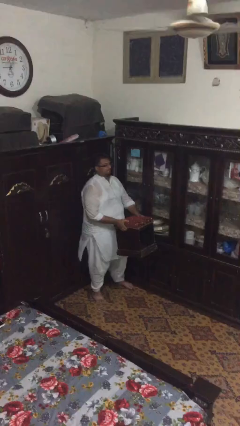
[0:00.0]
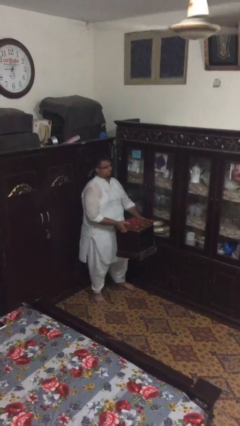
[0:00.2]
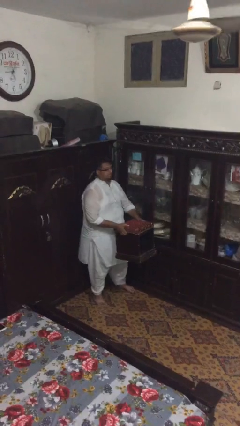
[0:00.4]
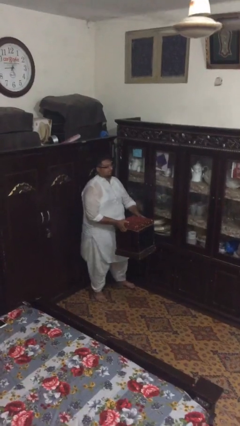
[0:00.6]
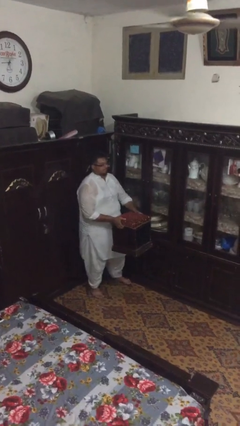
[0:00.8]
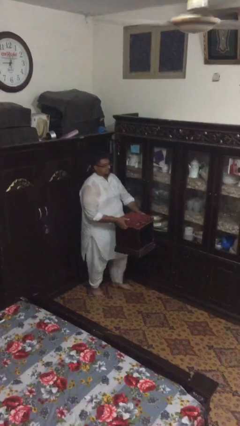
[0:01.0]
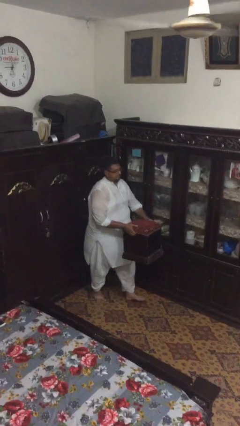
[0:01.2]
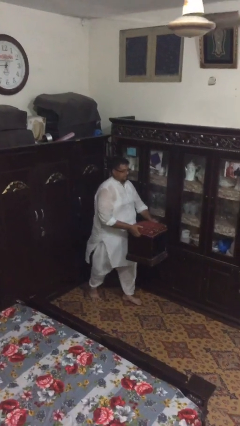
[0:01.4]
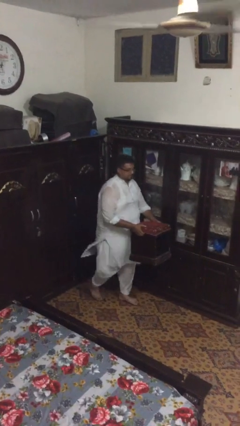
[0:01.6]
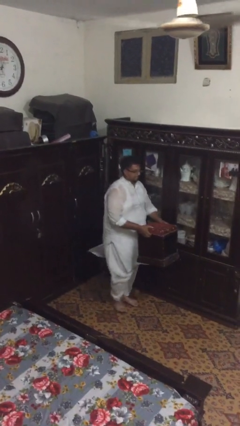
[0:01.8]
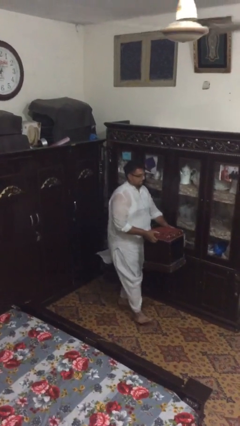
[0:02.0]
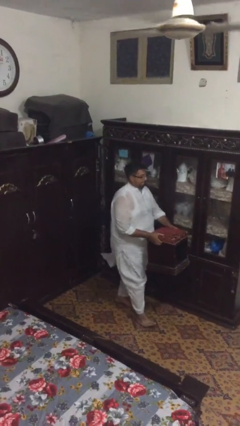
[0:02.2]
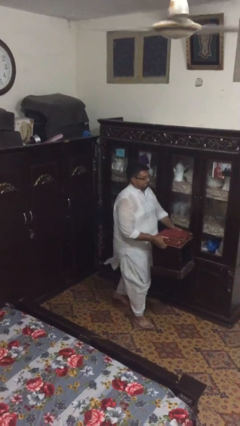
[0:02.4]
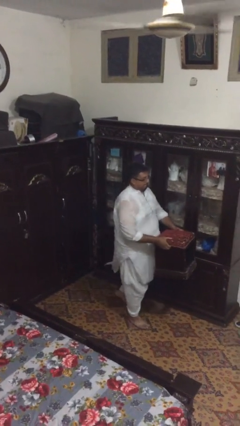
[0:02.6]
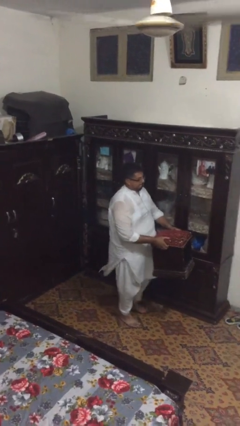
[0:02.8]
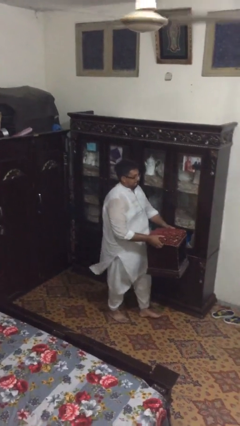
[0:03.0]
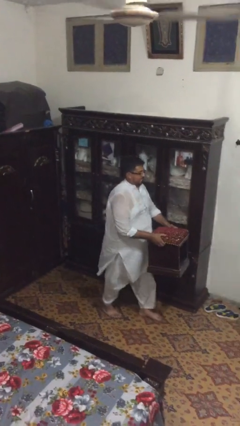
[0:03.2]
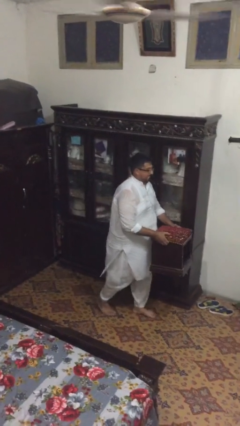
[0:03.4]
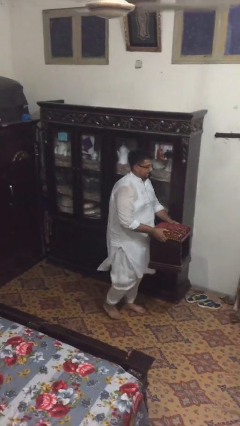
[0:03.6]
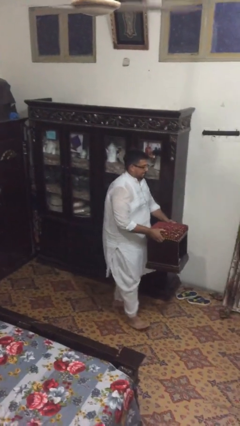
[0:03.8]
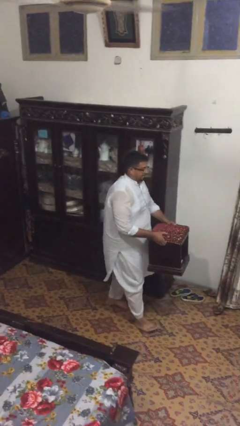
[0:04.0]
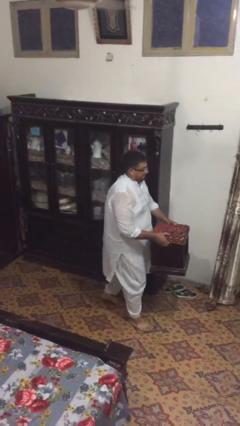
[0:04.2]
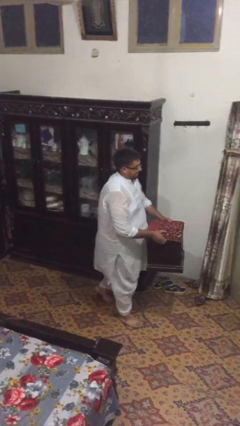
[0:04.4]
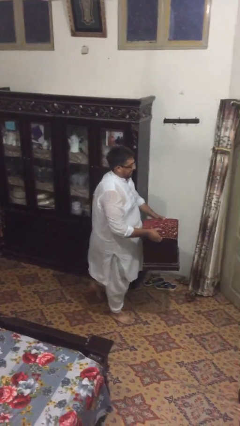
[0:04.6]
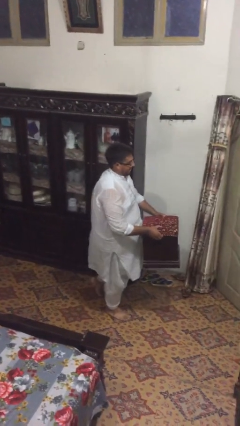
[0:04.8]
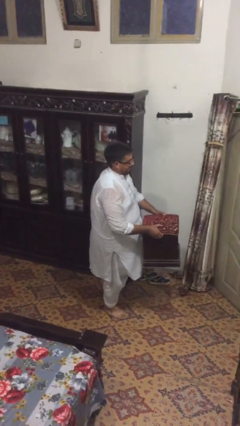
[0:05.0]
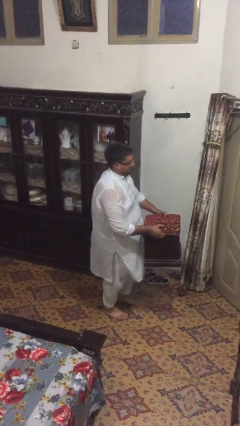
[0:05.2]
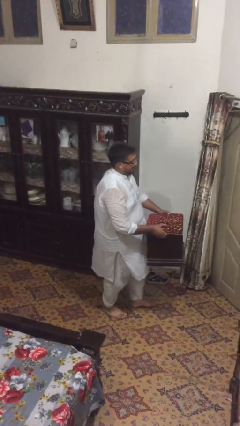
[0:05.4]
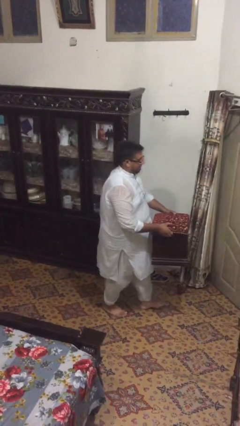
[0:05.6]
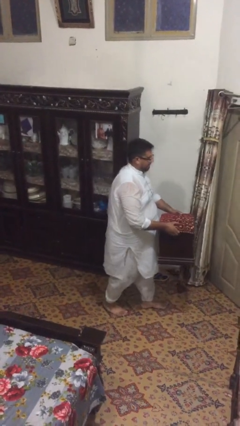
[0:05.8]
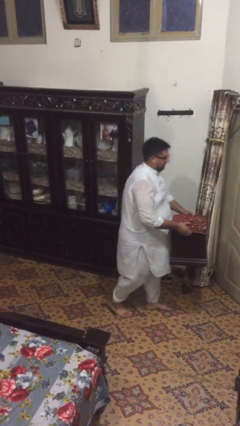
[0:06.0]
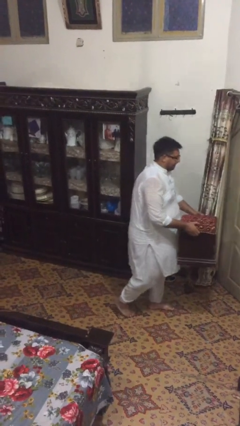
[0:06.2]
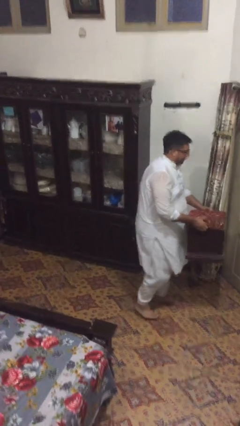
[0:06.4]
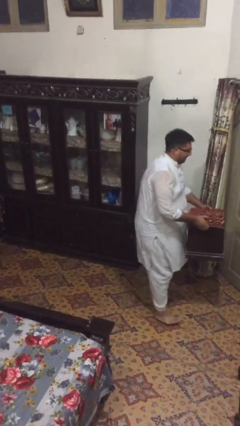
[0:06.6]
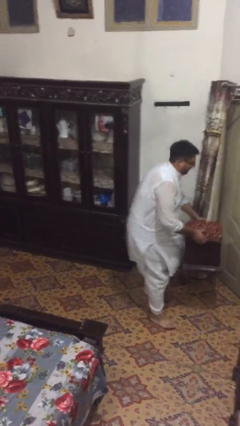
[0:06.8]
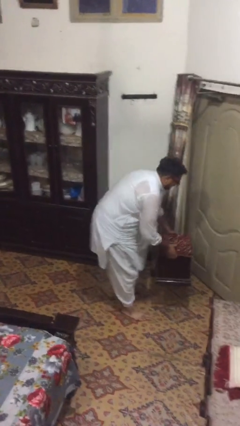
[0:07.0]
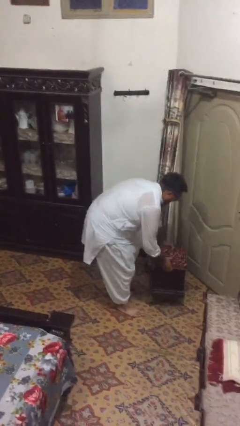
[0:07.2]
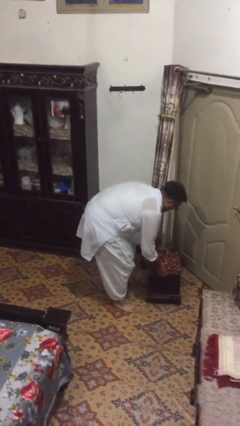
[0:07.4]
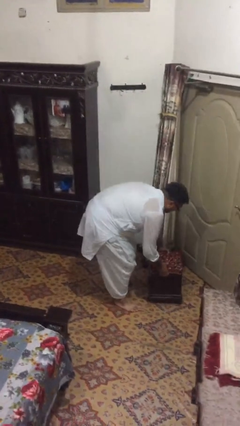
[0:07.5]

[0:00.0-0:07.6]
person carries heavy object

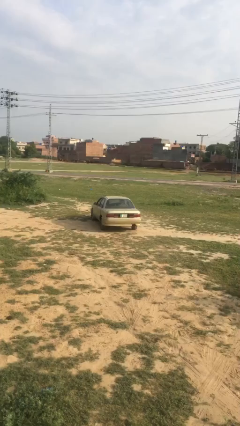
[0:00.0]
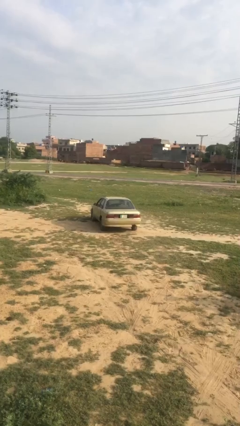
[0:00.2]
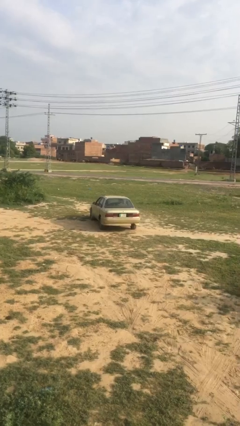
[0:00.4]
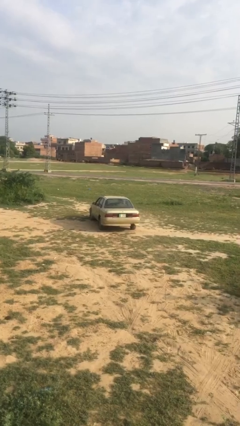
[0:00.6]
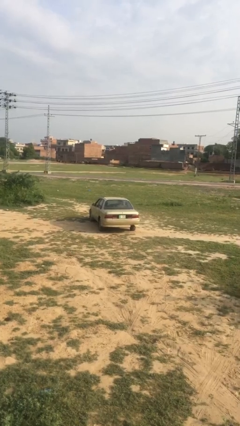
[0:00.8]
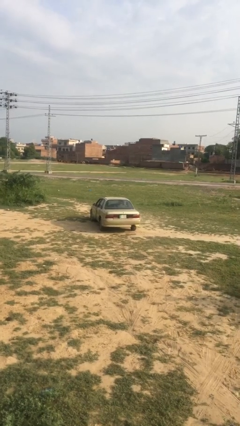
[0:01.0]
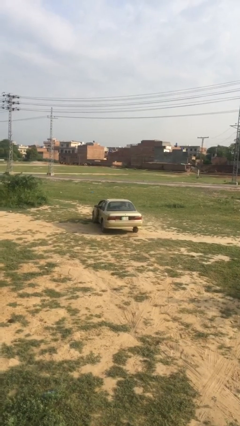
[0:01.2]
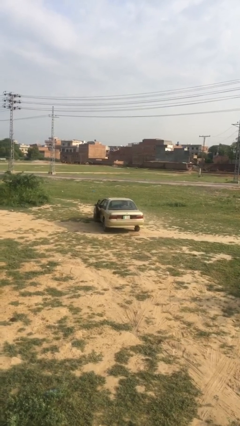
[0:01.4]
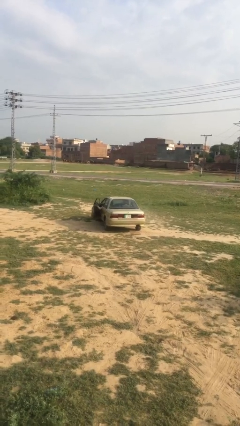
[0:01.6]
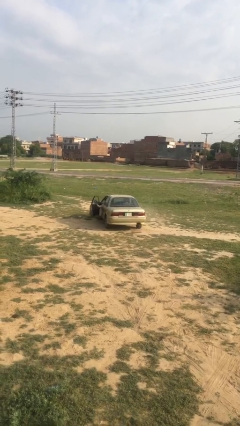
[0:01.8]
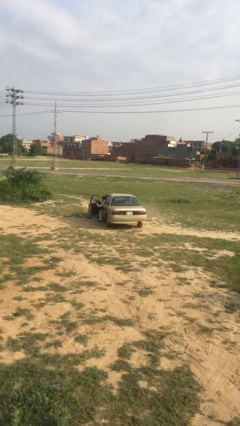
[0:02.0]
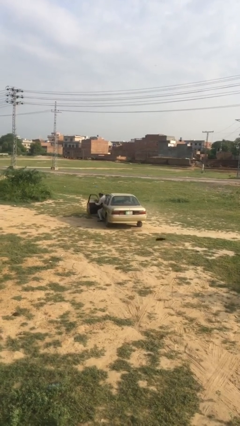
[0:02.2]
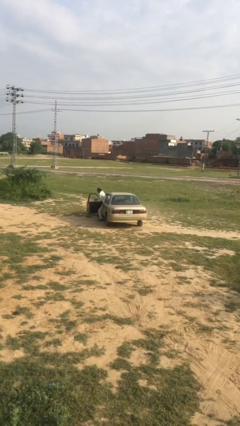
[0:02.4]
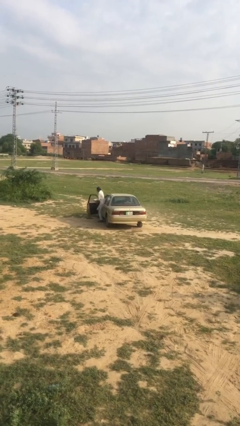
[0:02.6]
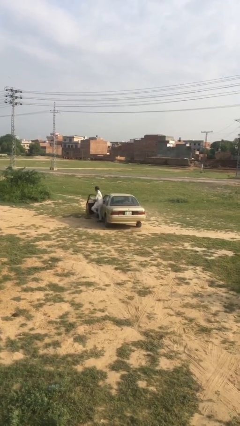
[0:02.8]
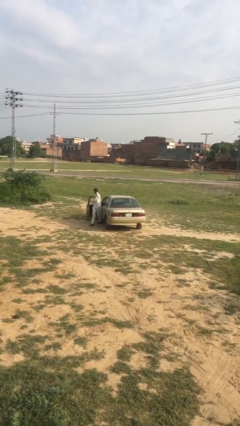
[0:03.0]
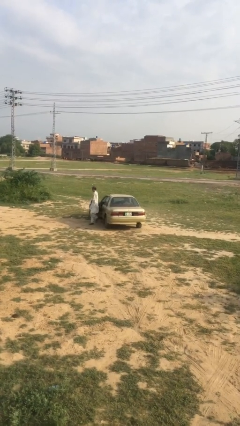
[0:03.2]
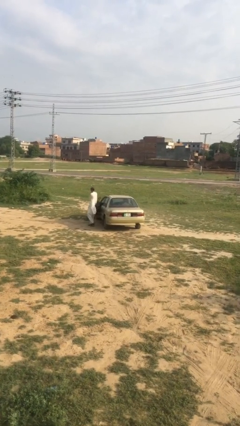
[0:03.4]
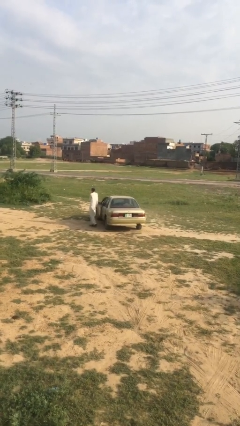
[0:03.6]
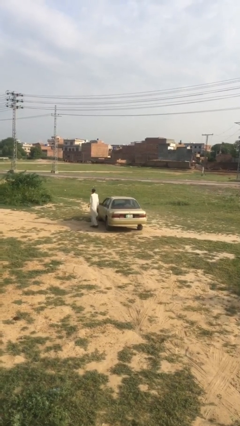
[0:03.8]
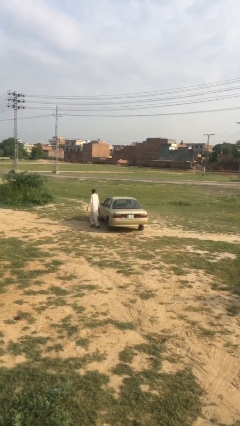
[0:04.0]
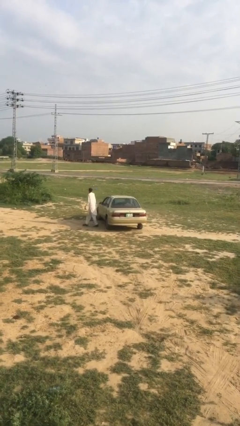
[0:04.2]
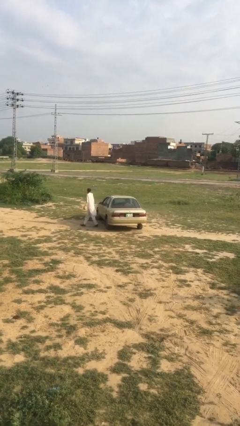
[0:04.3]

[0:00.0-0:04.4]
car drops off person

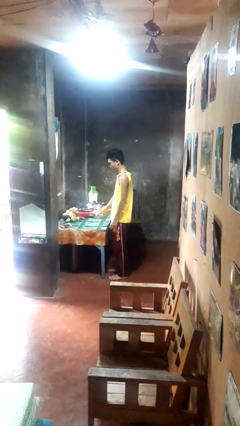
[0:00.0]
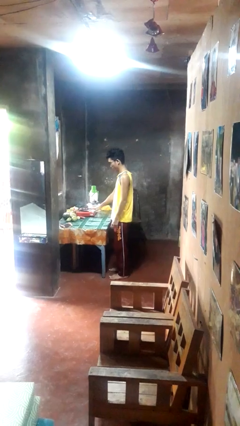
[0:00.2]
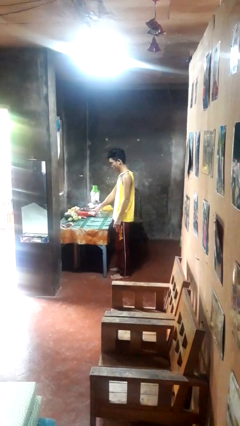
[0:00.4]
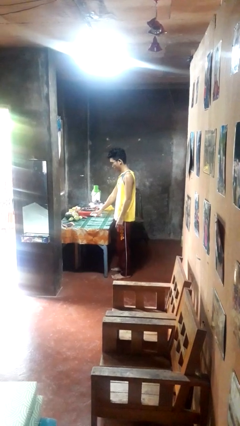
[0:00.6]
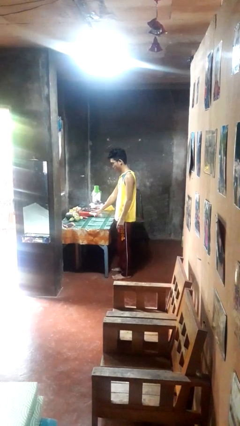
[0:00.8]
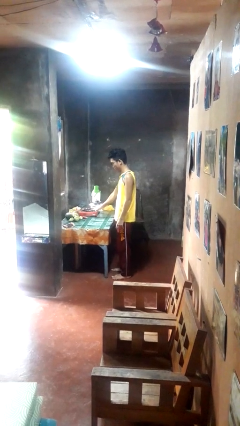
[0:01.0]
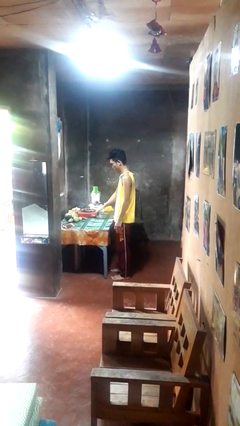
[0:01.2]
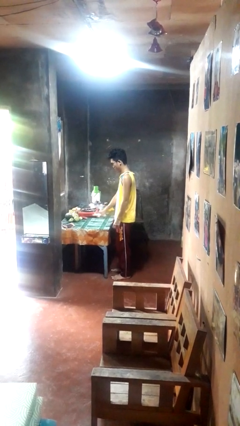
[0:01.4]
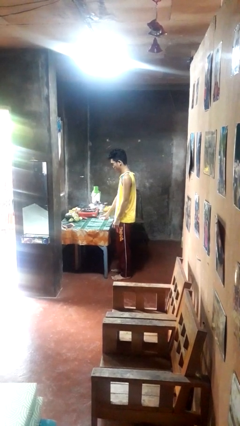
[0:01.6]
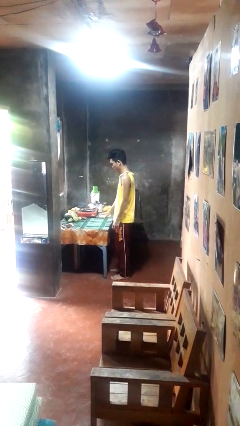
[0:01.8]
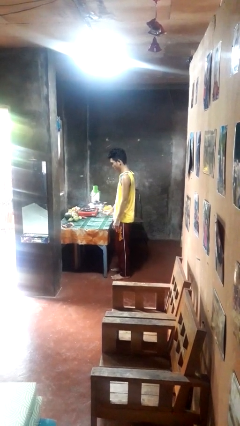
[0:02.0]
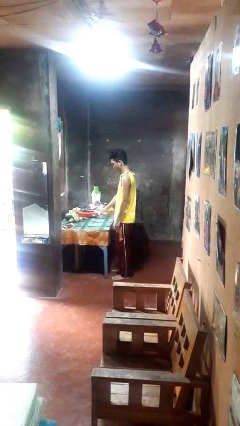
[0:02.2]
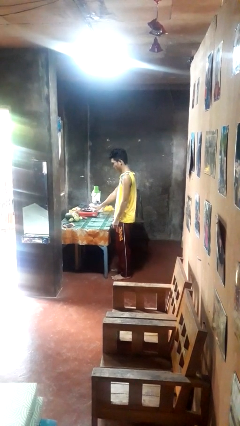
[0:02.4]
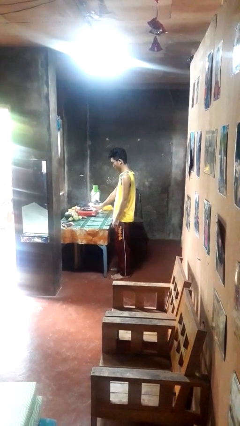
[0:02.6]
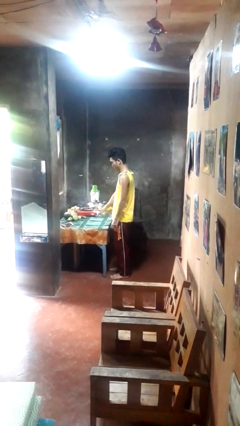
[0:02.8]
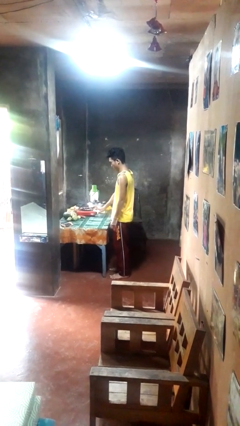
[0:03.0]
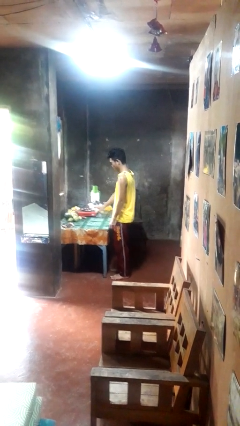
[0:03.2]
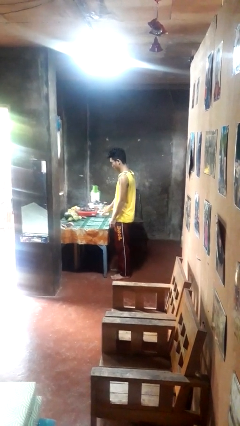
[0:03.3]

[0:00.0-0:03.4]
person sprays from bottle

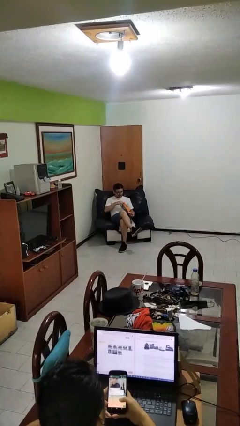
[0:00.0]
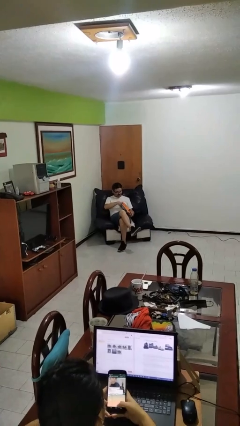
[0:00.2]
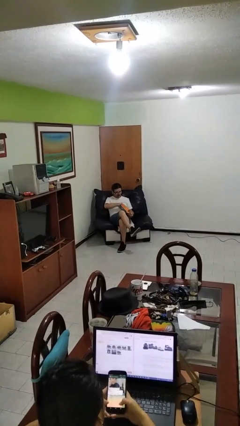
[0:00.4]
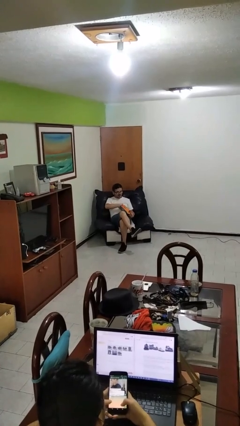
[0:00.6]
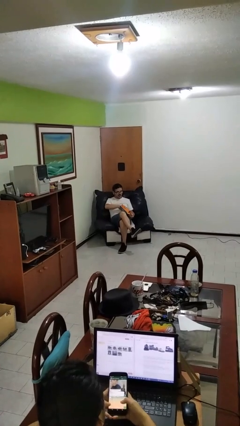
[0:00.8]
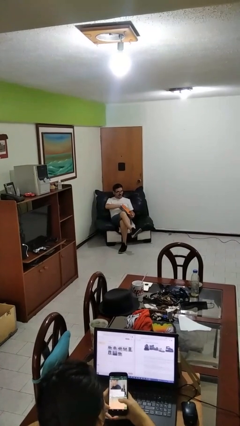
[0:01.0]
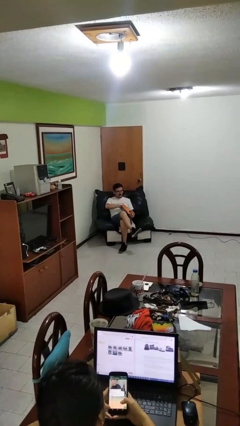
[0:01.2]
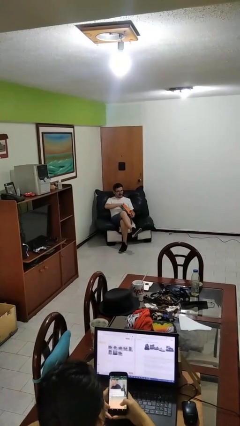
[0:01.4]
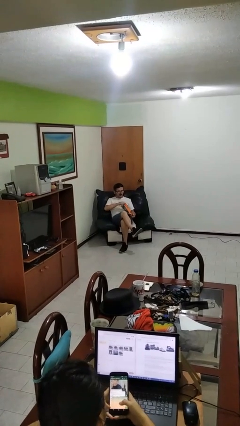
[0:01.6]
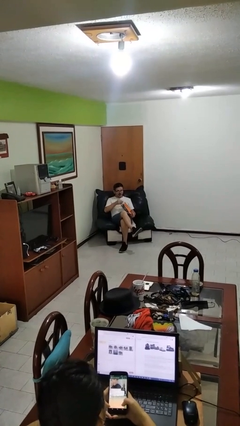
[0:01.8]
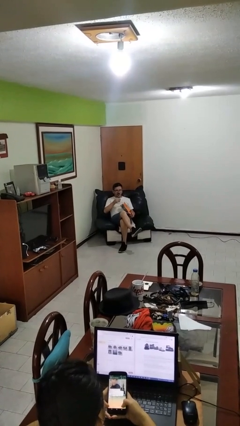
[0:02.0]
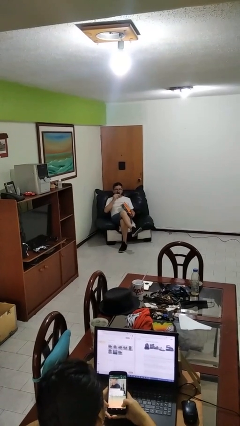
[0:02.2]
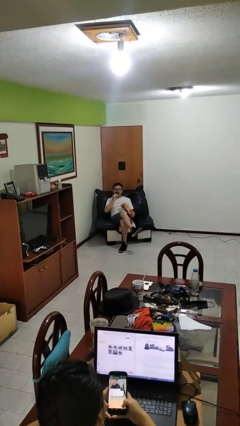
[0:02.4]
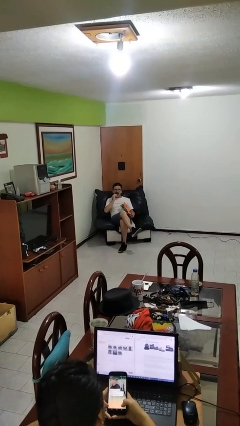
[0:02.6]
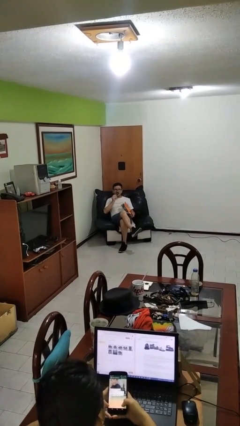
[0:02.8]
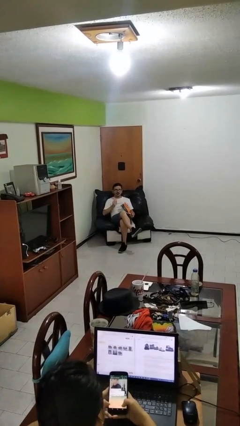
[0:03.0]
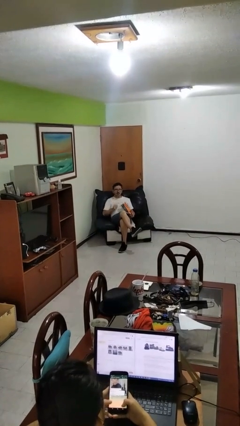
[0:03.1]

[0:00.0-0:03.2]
person eats snack from bag
